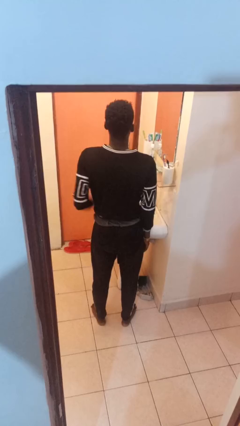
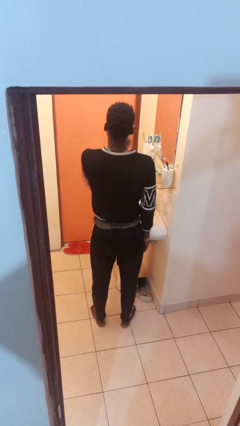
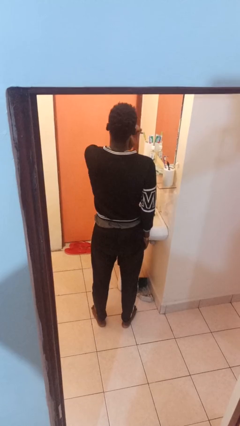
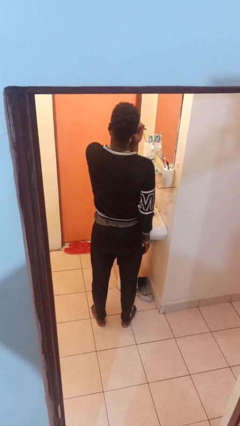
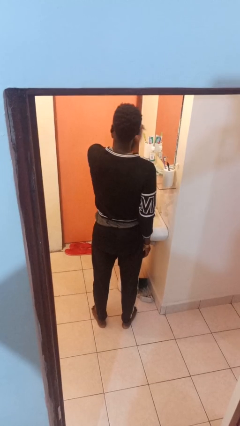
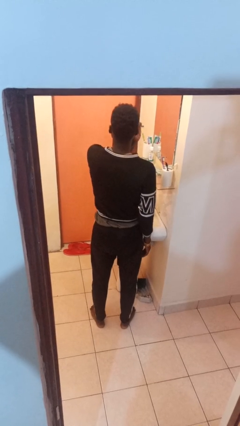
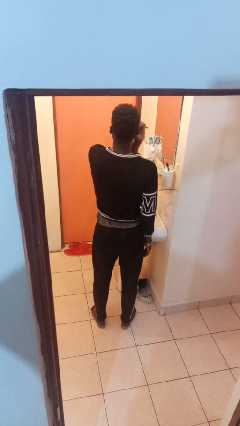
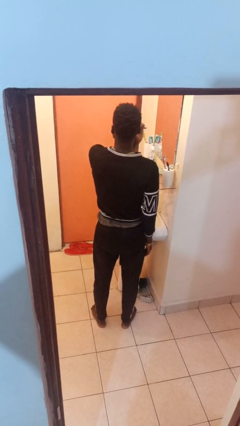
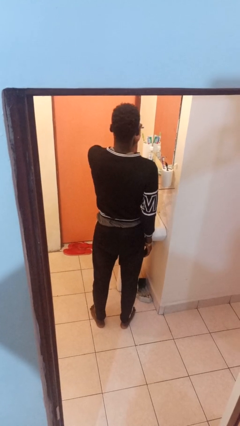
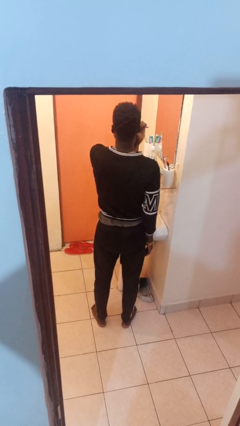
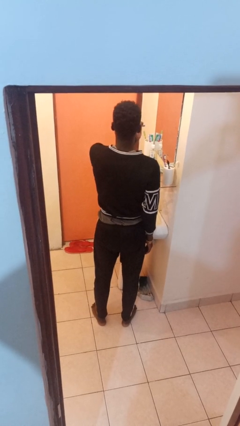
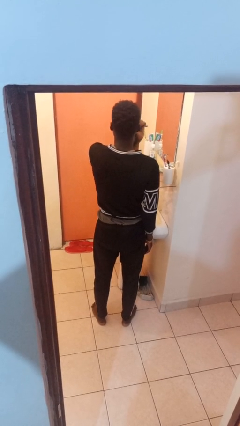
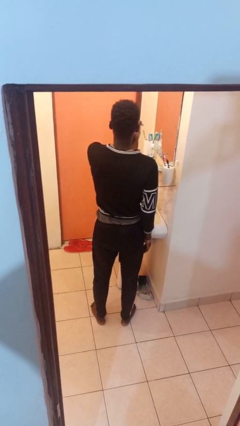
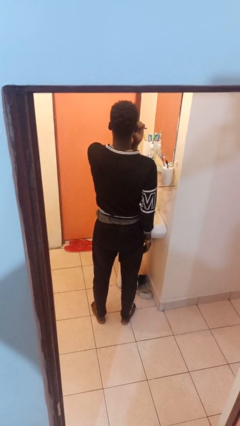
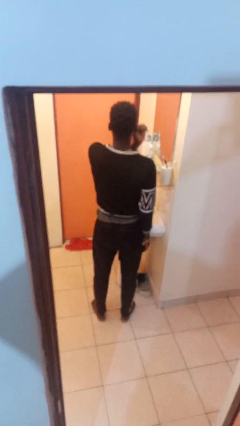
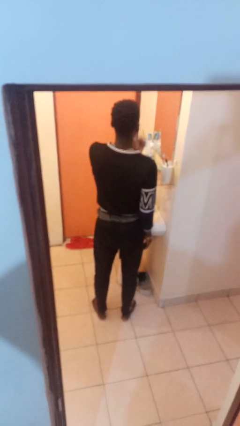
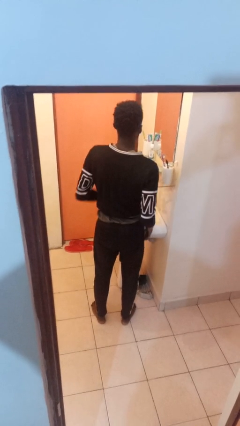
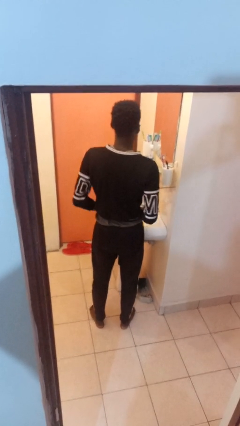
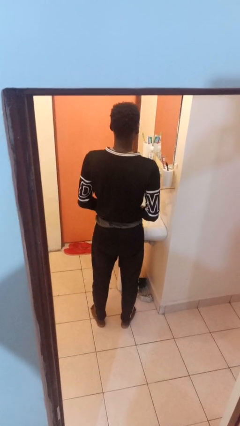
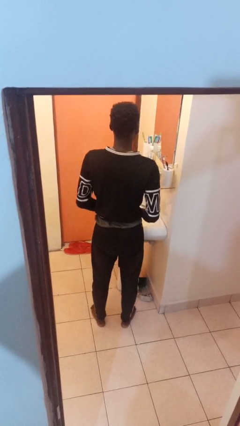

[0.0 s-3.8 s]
person brushes teeth

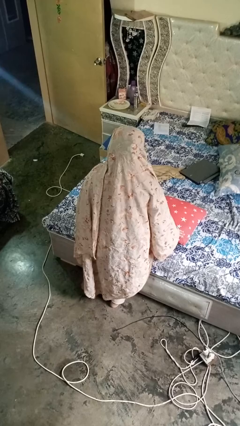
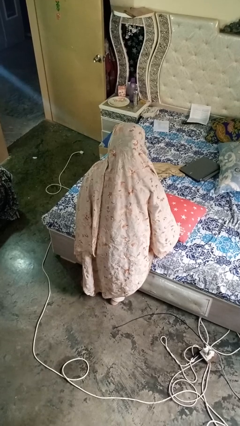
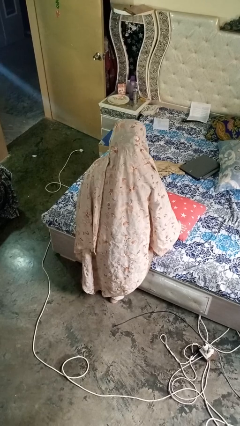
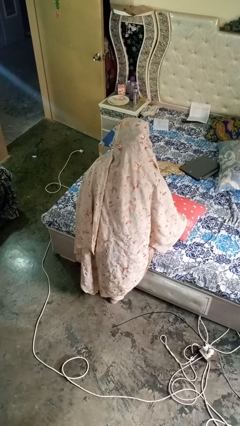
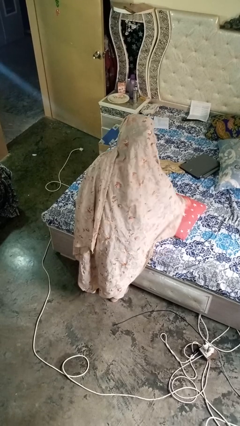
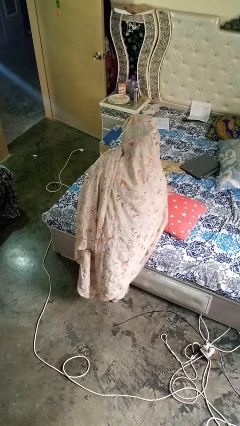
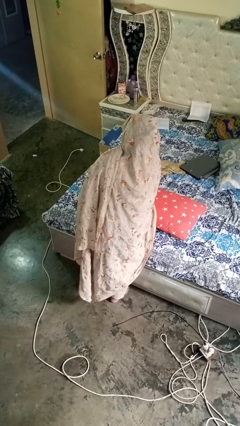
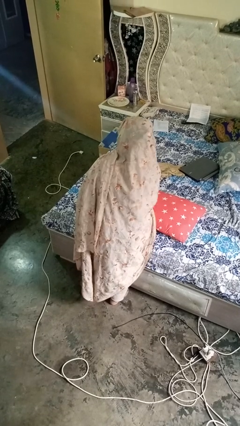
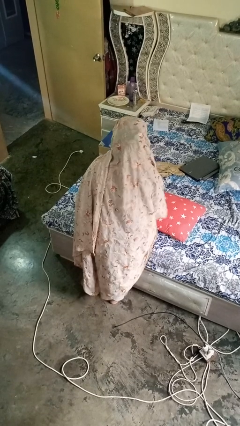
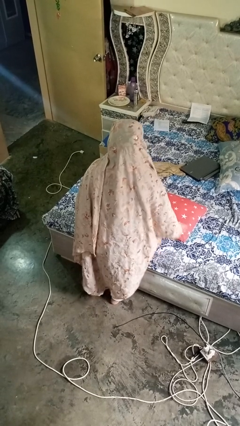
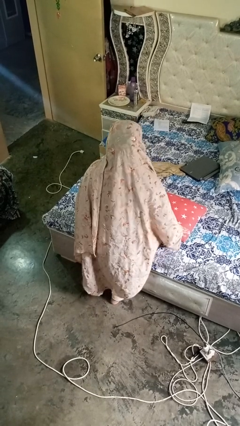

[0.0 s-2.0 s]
person waves hand over object

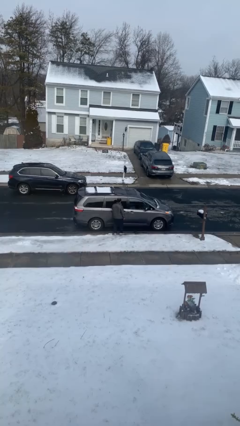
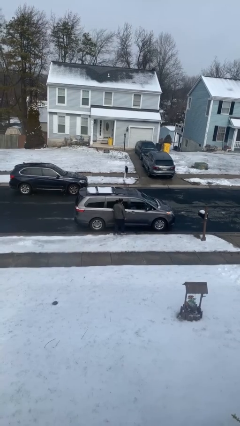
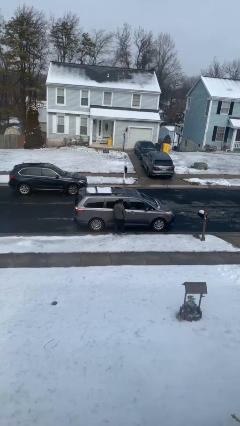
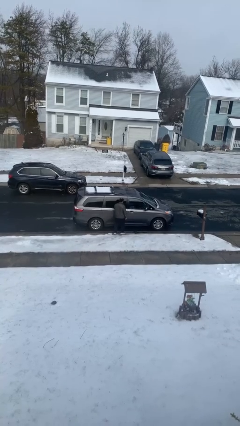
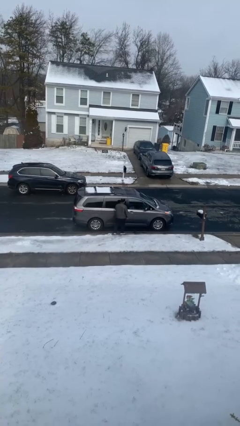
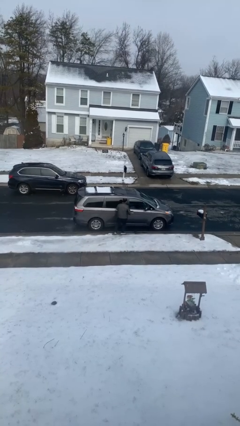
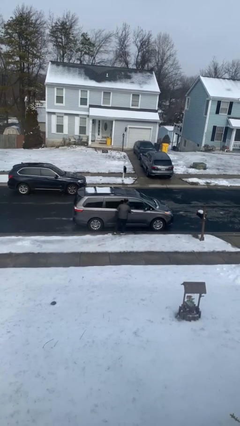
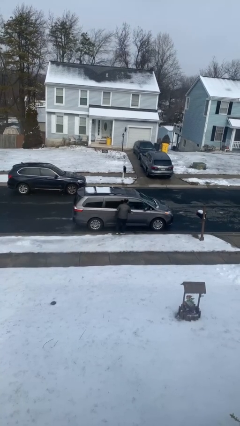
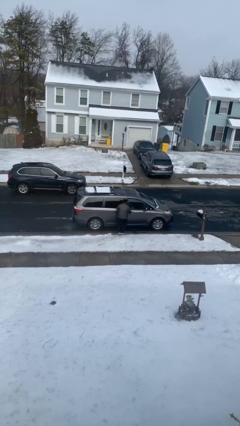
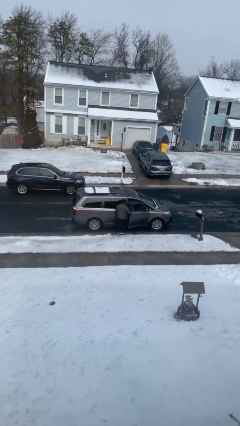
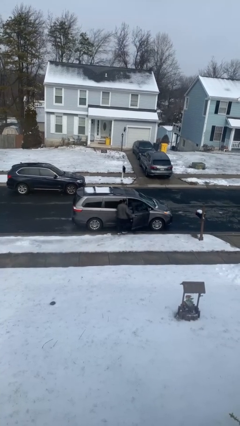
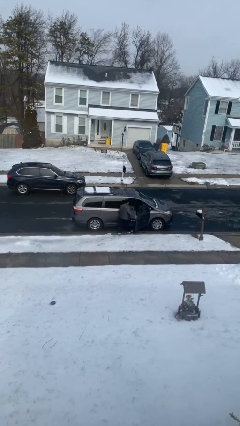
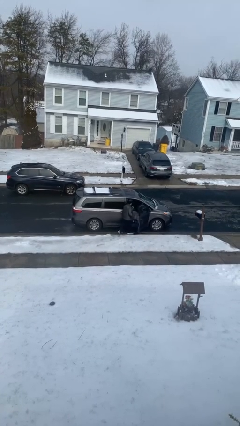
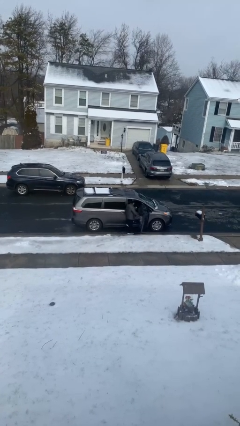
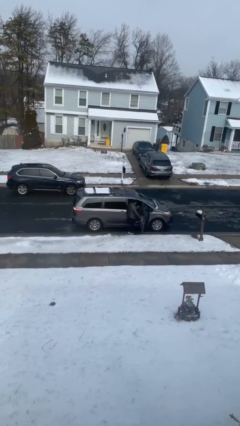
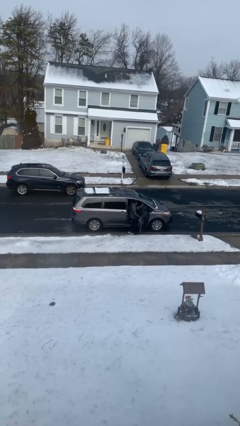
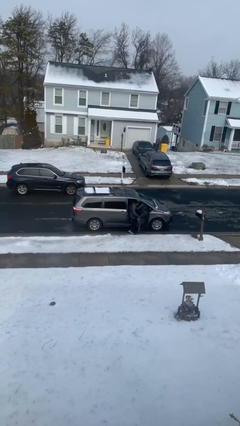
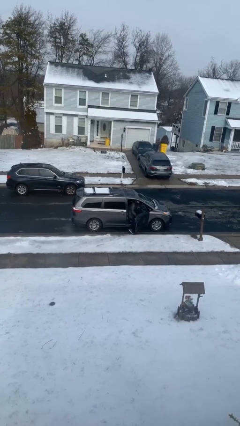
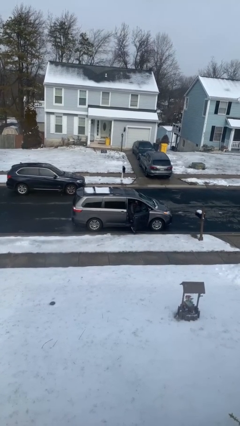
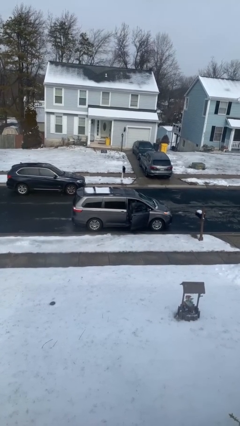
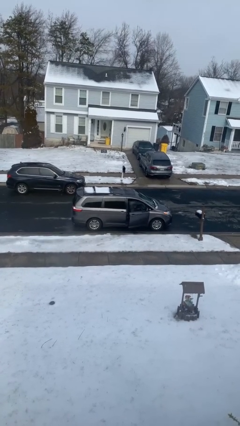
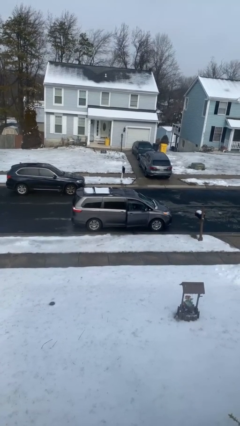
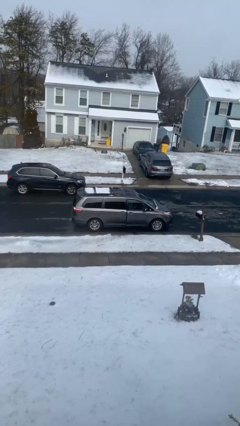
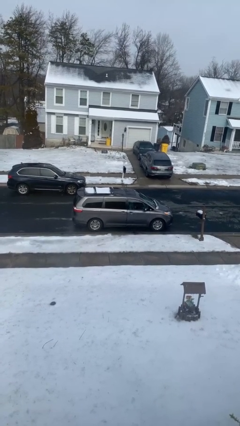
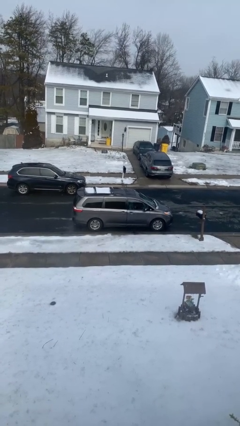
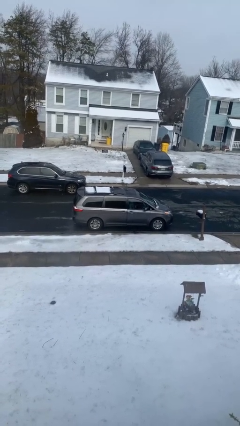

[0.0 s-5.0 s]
car picks up person

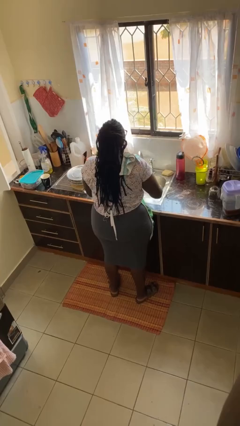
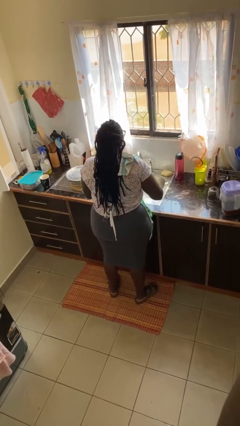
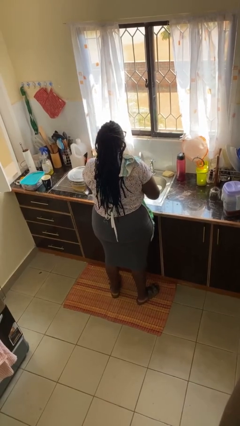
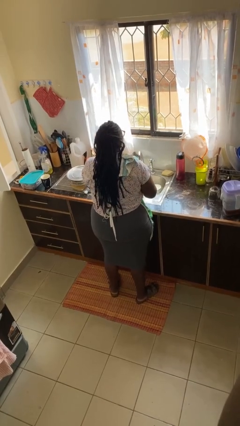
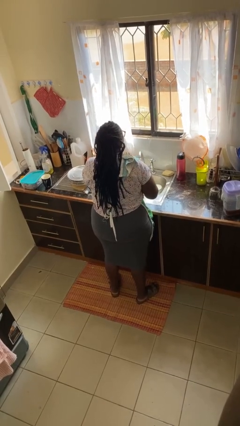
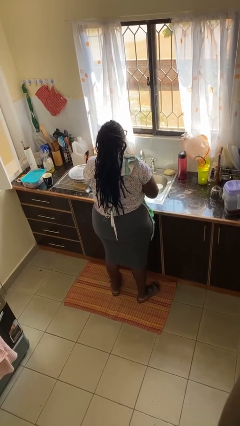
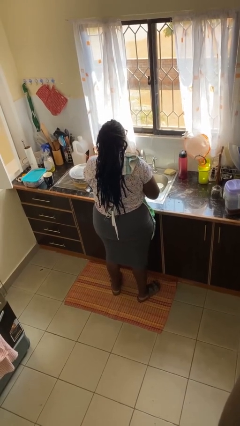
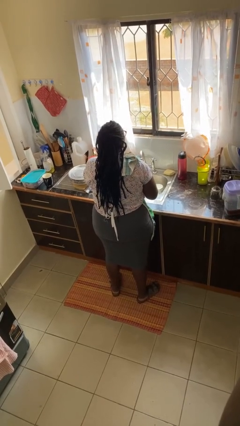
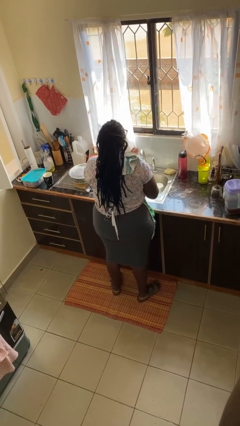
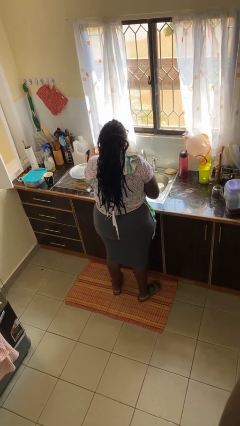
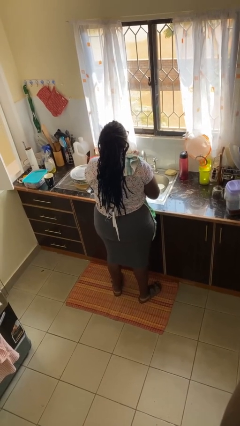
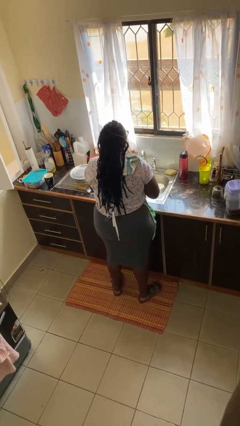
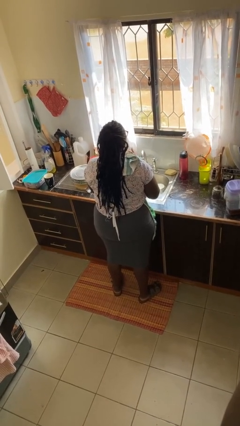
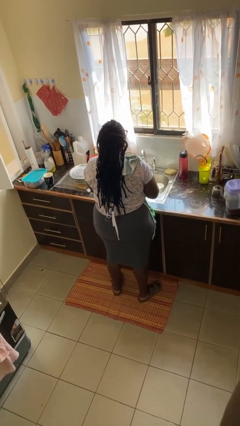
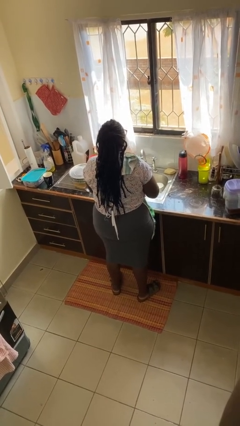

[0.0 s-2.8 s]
person dries hands with towel

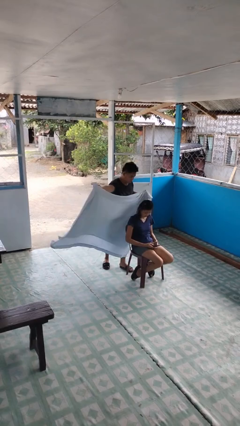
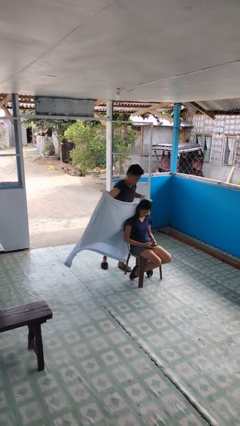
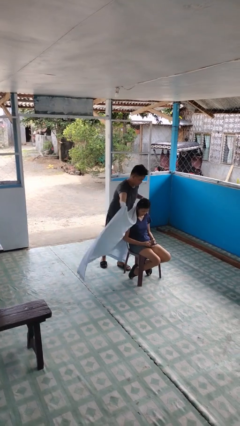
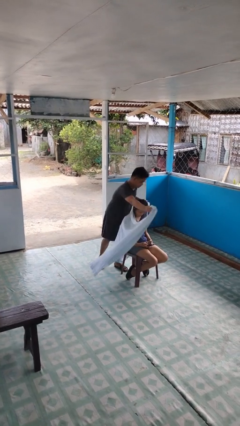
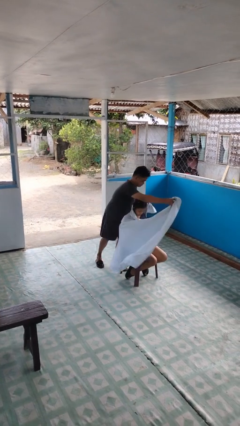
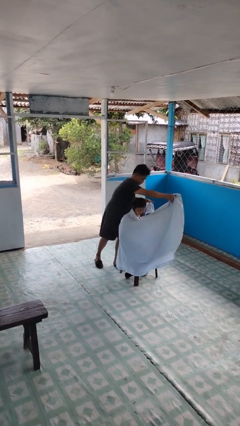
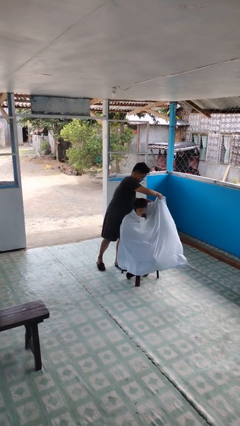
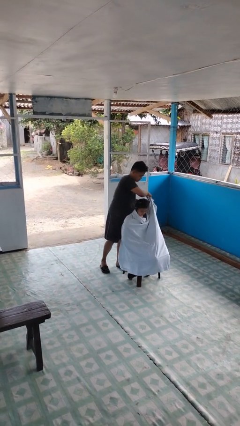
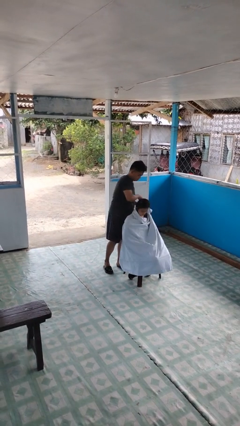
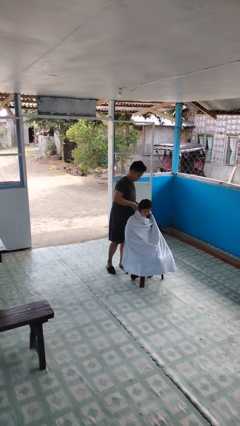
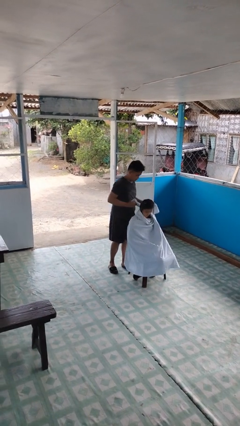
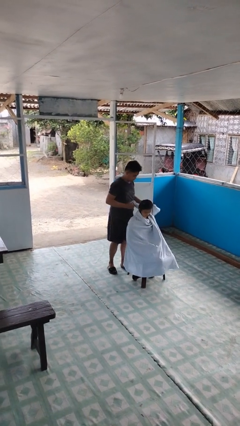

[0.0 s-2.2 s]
person covers friend with blanket

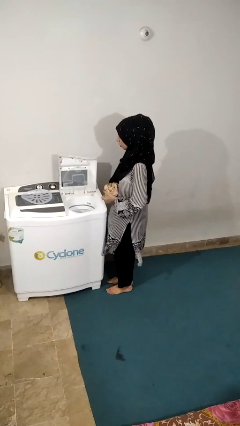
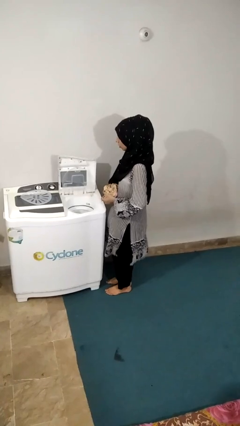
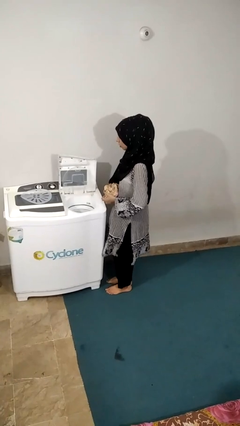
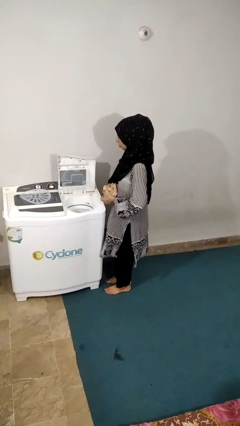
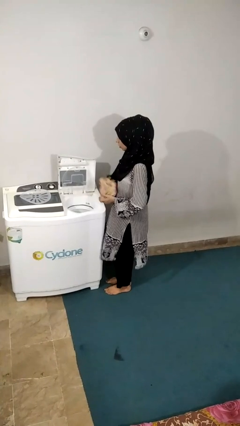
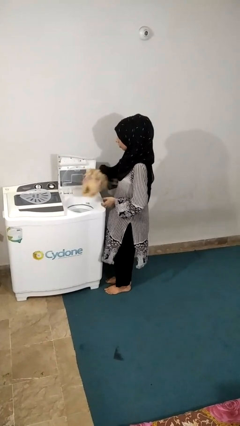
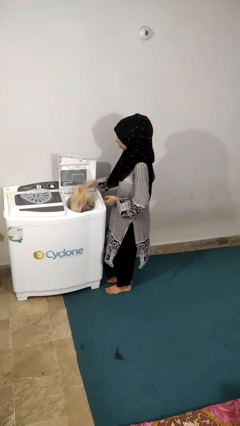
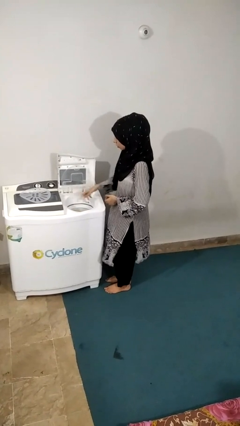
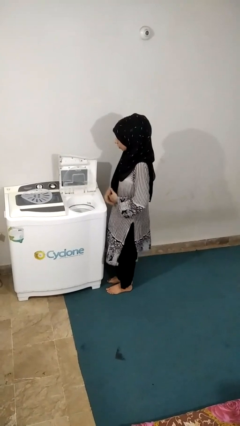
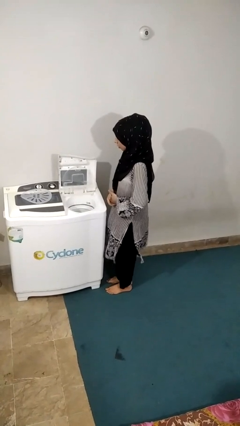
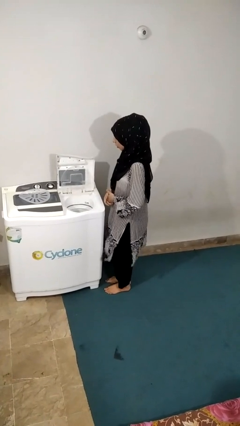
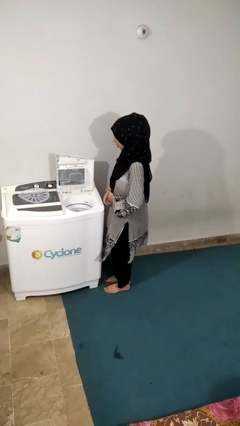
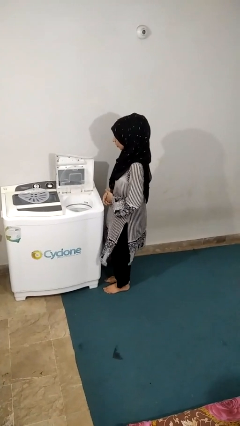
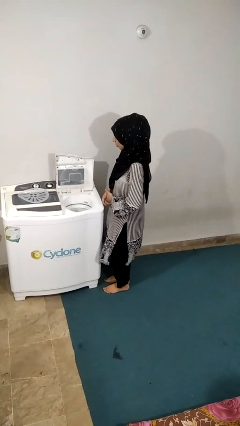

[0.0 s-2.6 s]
person loads dryer
